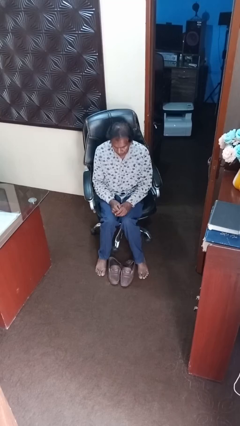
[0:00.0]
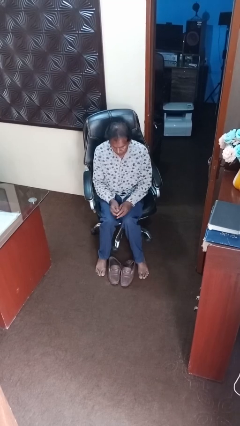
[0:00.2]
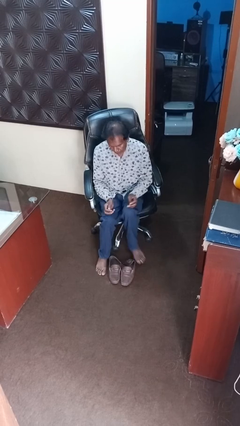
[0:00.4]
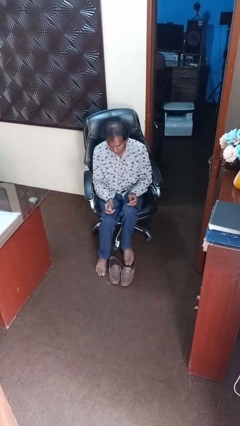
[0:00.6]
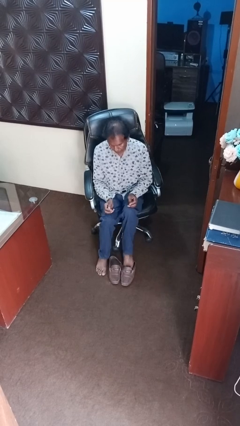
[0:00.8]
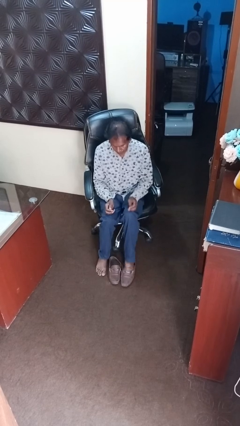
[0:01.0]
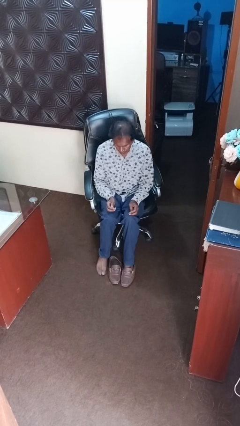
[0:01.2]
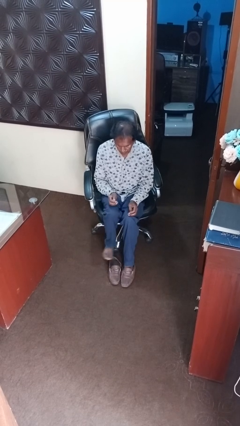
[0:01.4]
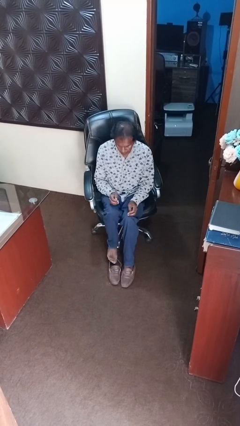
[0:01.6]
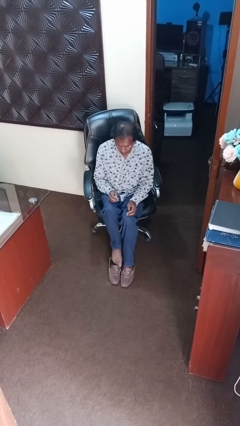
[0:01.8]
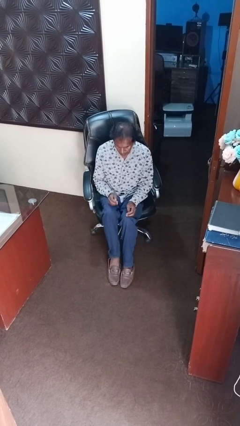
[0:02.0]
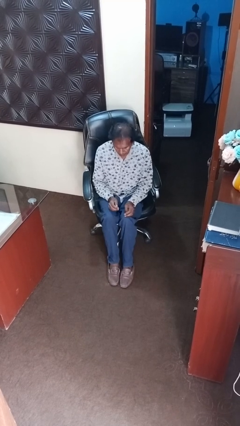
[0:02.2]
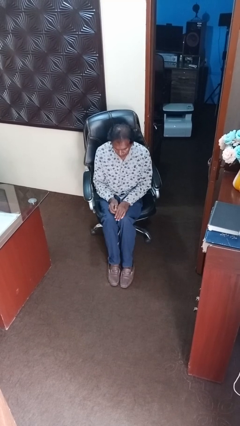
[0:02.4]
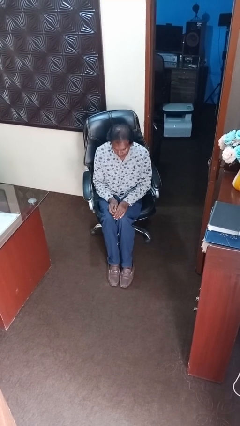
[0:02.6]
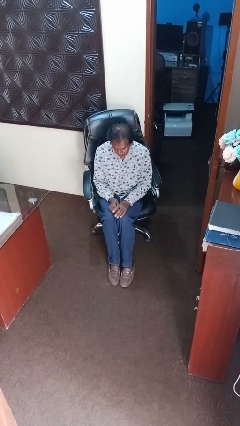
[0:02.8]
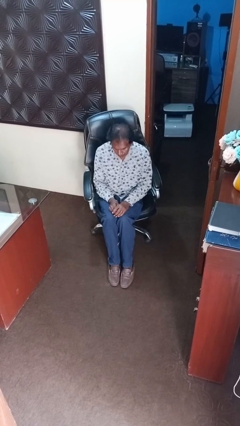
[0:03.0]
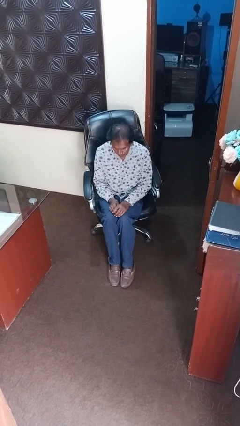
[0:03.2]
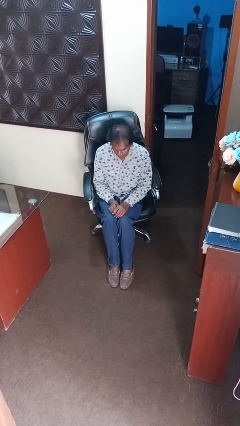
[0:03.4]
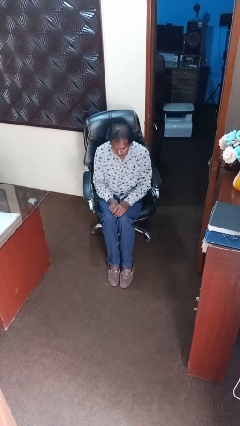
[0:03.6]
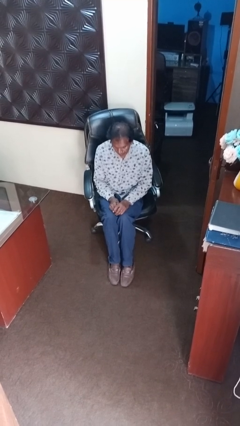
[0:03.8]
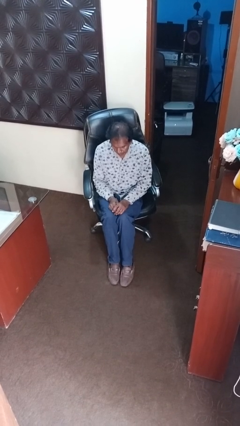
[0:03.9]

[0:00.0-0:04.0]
person puts on shoes

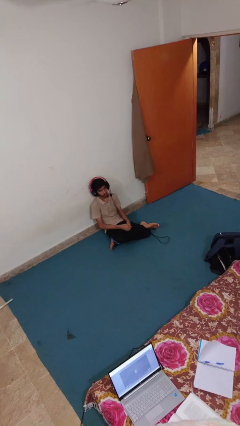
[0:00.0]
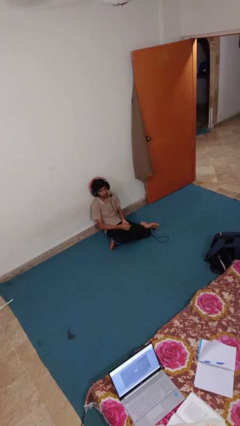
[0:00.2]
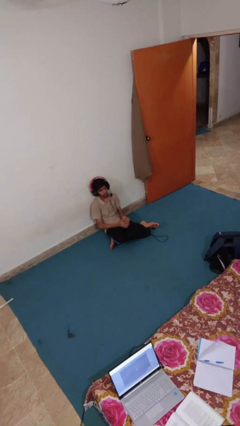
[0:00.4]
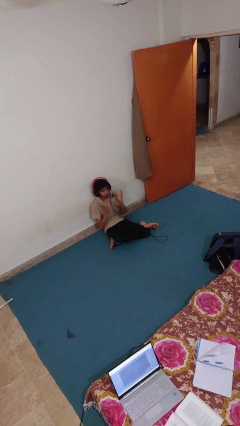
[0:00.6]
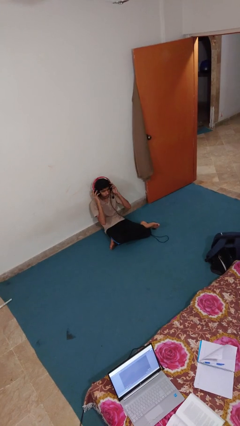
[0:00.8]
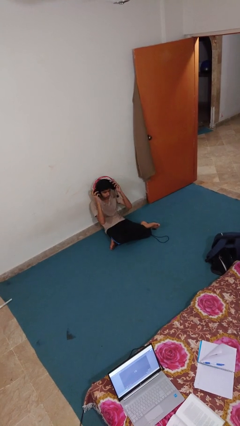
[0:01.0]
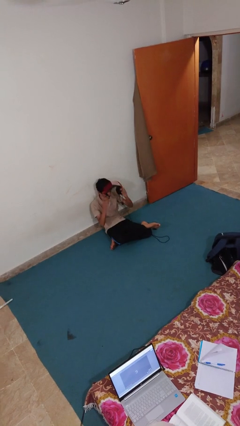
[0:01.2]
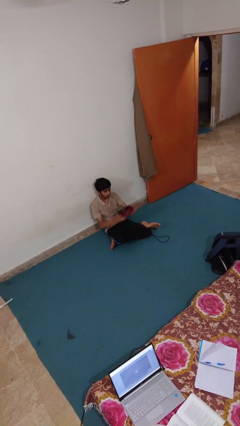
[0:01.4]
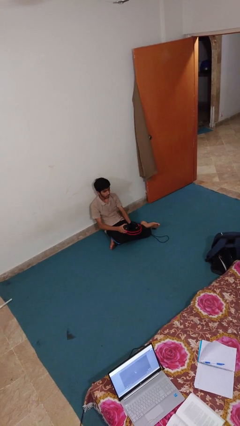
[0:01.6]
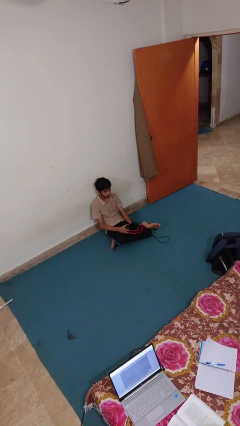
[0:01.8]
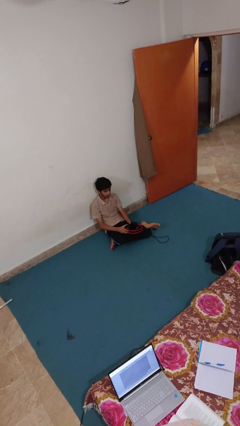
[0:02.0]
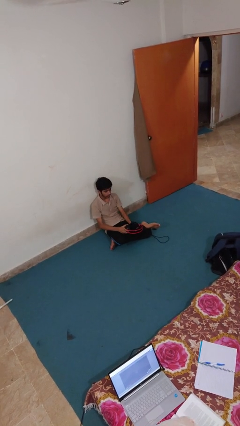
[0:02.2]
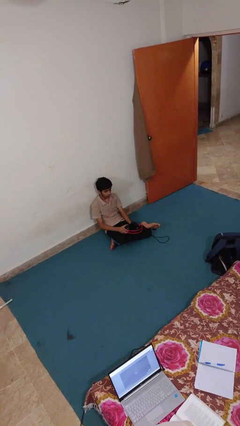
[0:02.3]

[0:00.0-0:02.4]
person takes off headphones

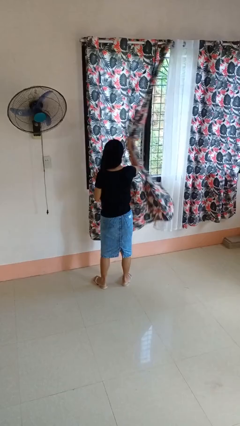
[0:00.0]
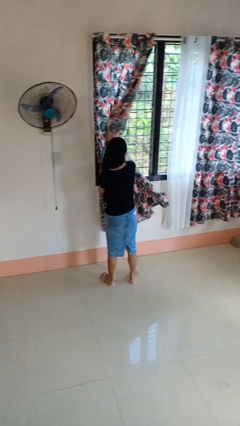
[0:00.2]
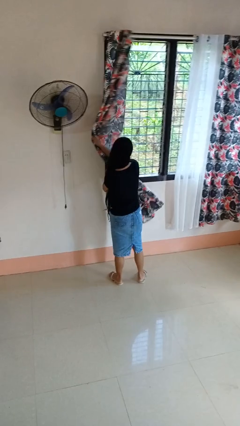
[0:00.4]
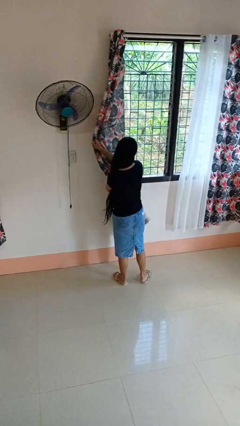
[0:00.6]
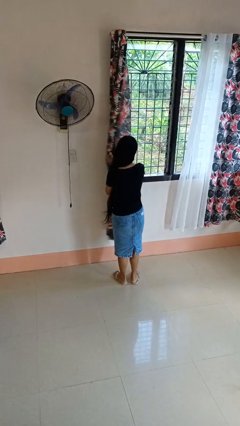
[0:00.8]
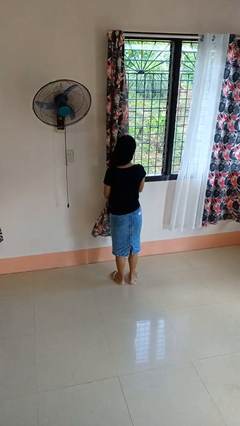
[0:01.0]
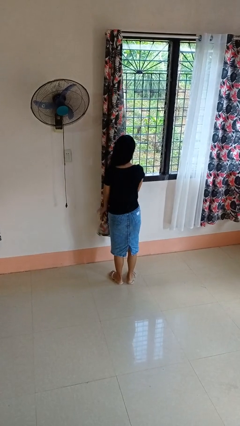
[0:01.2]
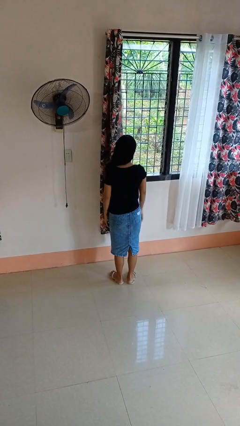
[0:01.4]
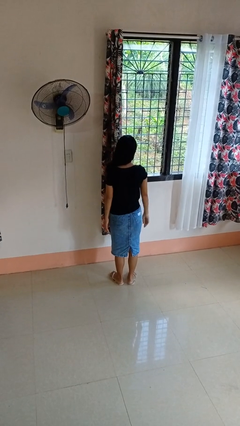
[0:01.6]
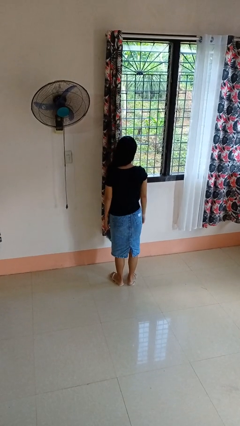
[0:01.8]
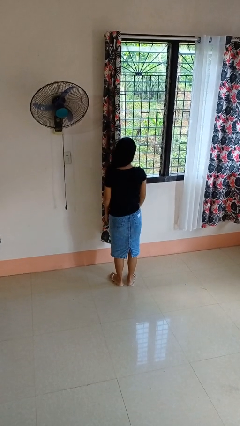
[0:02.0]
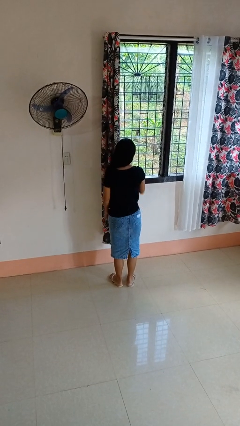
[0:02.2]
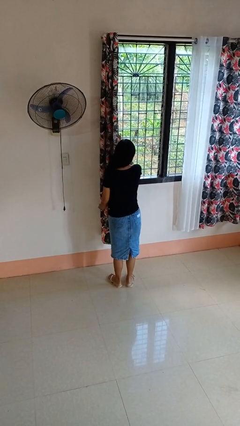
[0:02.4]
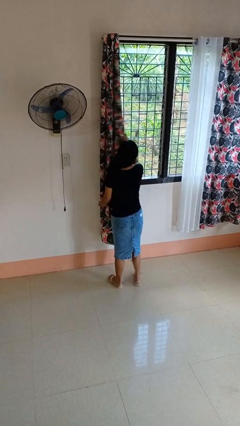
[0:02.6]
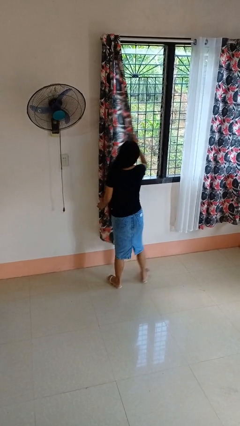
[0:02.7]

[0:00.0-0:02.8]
person opens curtains

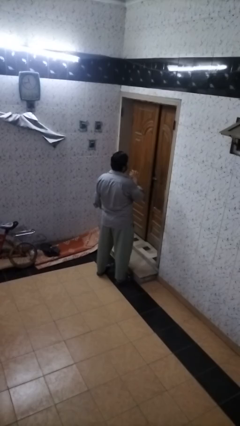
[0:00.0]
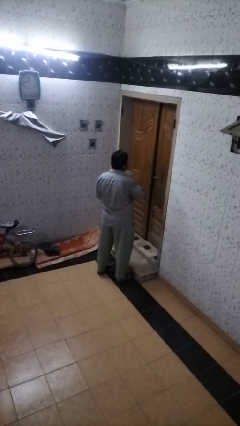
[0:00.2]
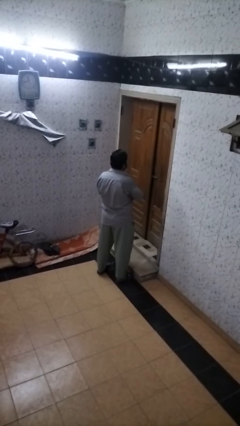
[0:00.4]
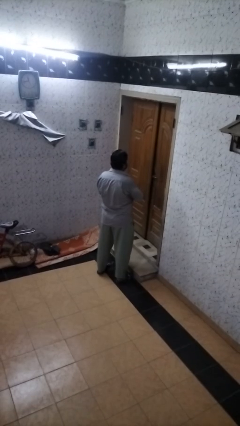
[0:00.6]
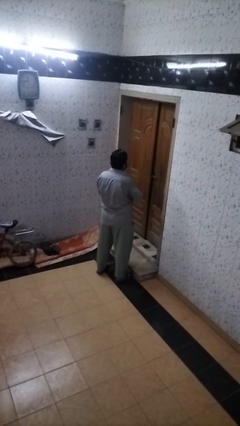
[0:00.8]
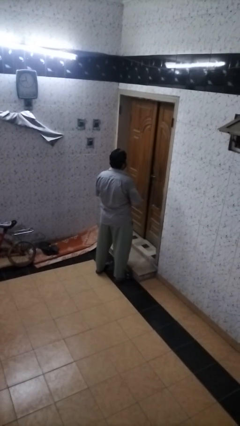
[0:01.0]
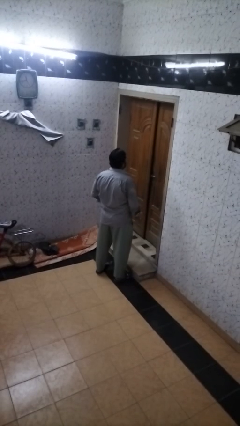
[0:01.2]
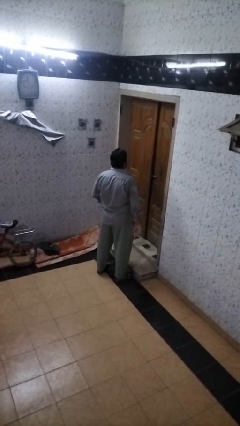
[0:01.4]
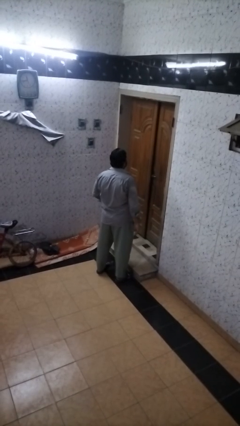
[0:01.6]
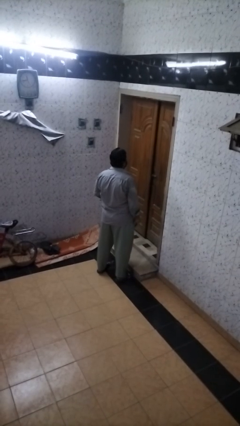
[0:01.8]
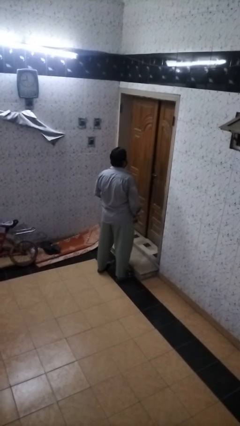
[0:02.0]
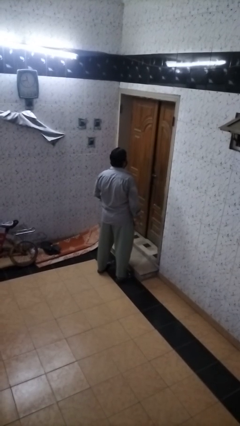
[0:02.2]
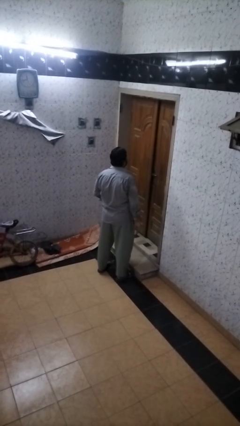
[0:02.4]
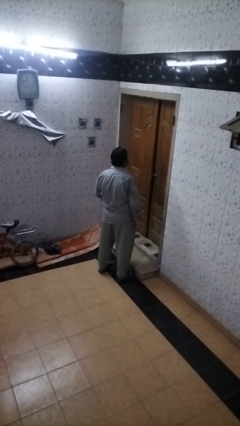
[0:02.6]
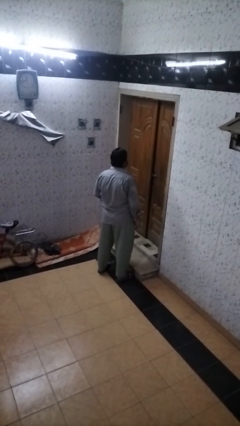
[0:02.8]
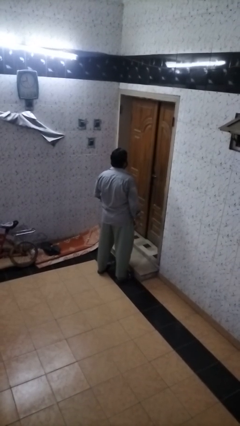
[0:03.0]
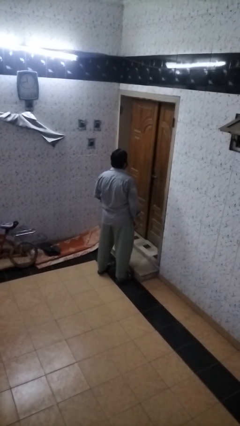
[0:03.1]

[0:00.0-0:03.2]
person takes off ring

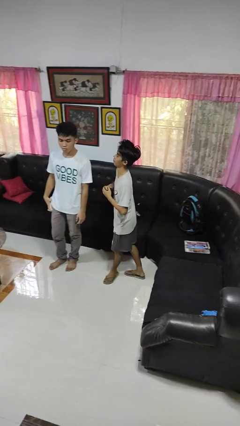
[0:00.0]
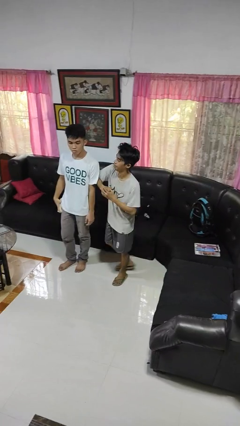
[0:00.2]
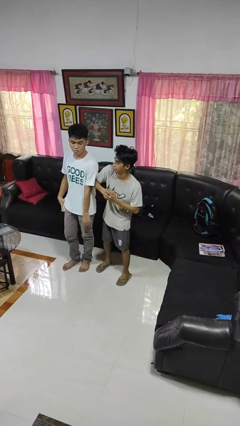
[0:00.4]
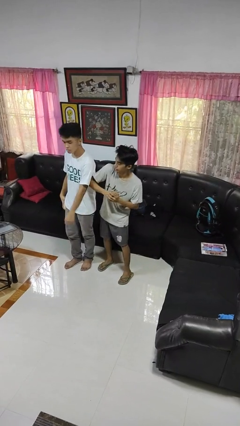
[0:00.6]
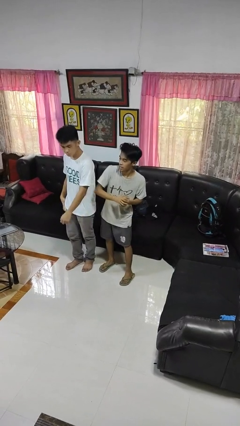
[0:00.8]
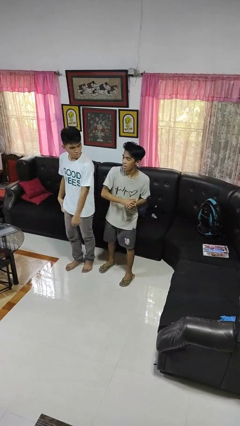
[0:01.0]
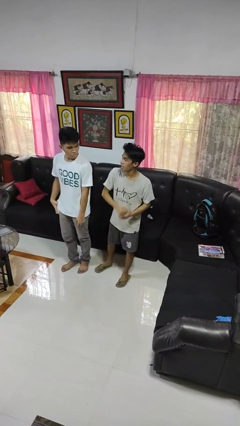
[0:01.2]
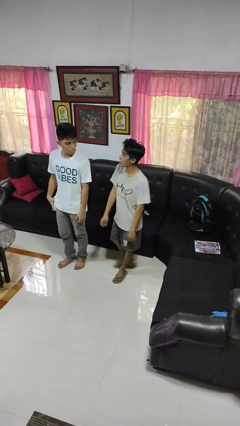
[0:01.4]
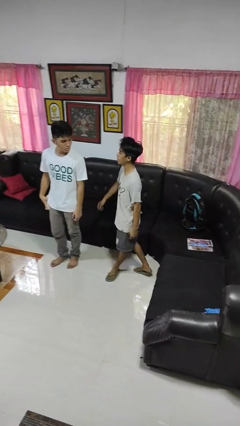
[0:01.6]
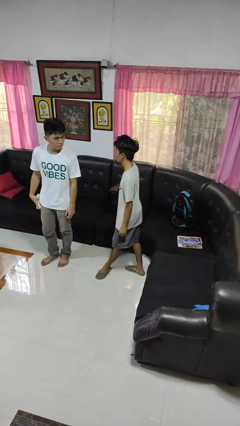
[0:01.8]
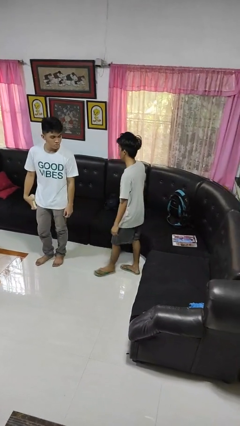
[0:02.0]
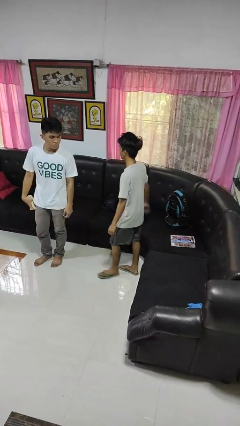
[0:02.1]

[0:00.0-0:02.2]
person nudges person with elbow

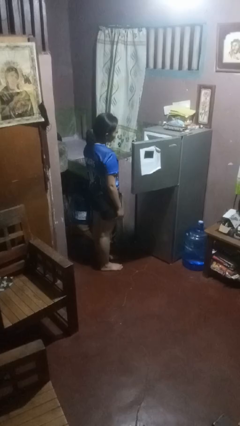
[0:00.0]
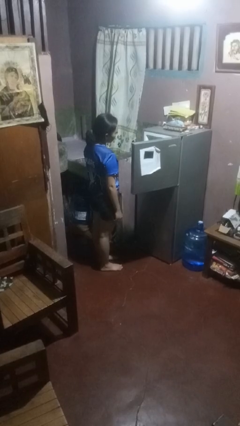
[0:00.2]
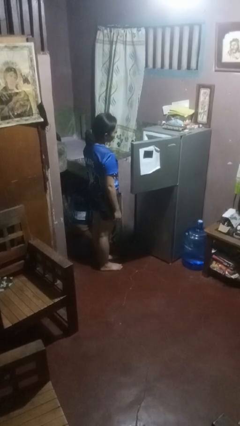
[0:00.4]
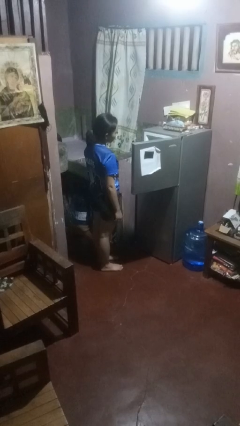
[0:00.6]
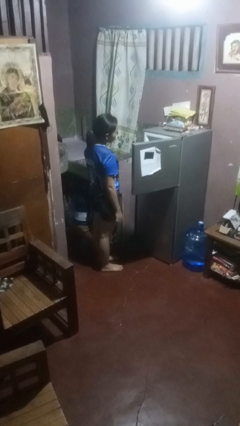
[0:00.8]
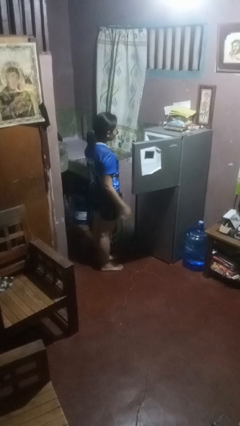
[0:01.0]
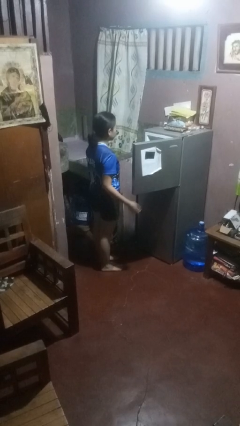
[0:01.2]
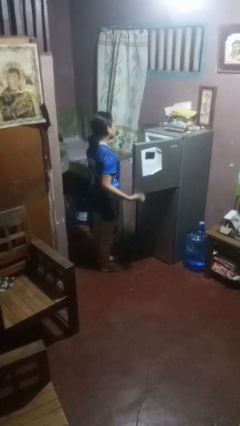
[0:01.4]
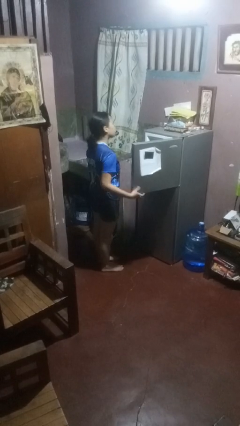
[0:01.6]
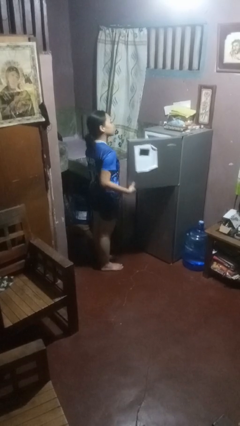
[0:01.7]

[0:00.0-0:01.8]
person closes refrigerator

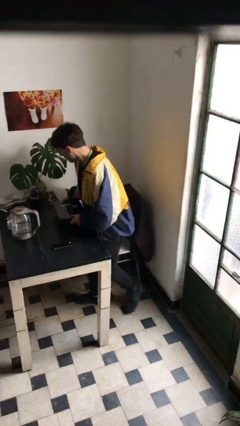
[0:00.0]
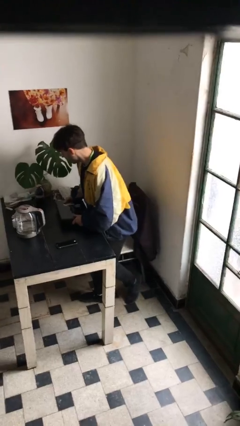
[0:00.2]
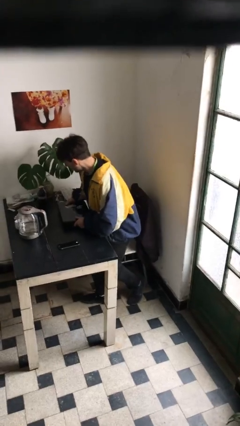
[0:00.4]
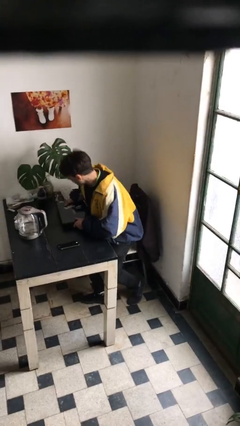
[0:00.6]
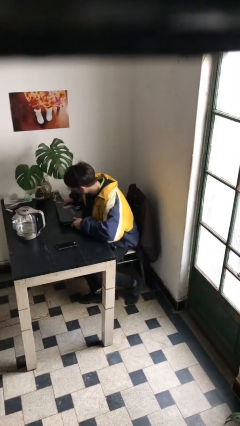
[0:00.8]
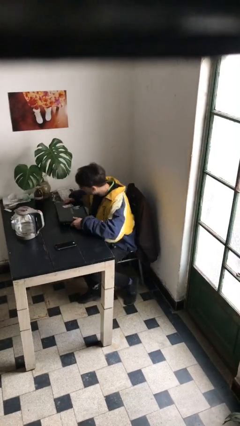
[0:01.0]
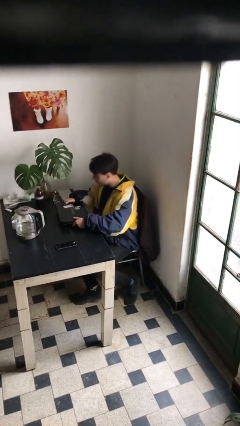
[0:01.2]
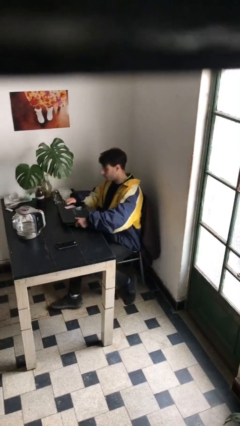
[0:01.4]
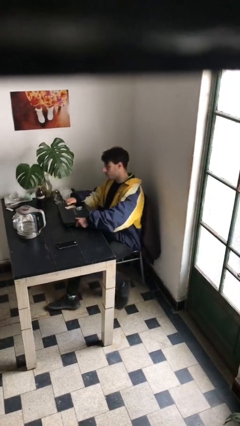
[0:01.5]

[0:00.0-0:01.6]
person sits down
